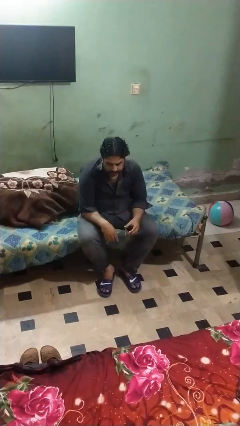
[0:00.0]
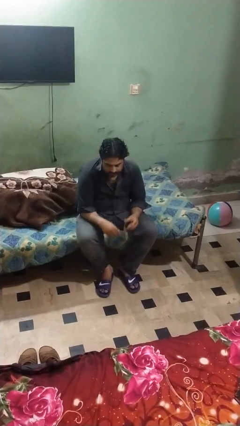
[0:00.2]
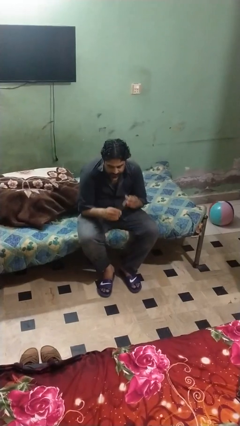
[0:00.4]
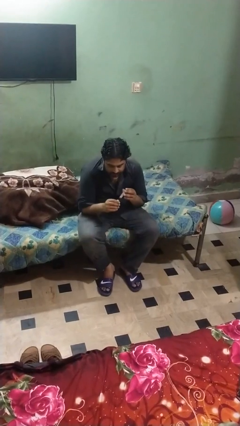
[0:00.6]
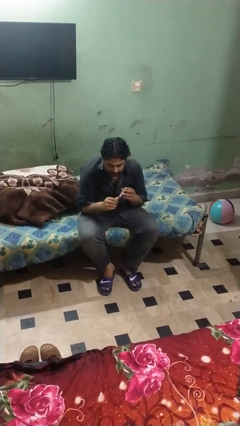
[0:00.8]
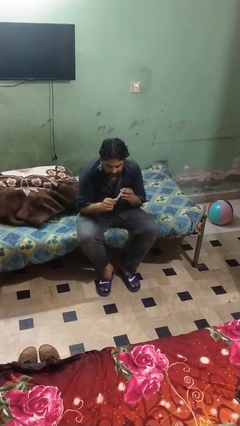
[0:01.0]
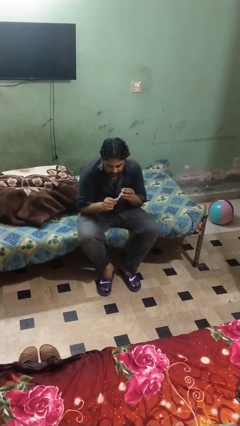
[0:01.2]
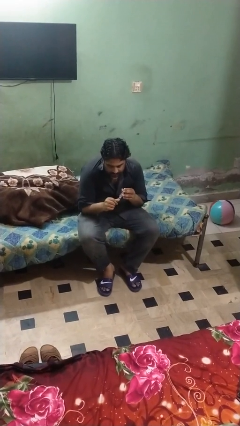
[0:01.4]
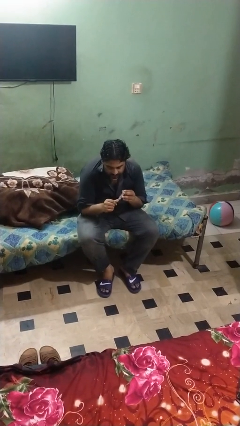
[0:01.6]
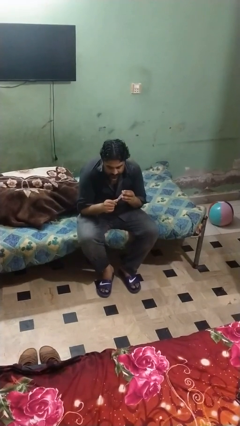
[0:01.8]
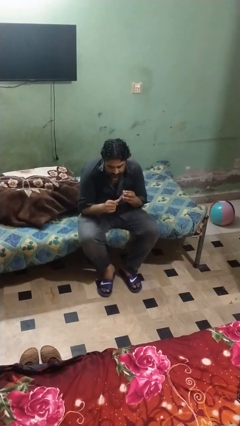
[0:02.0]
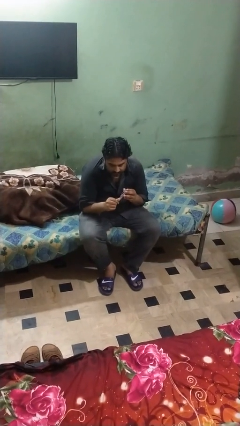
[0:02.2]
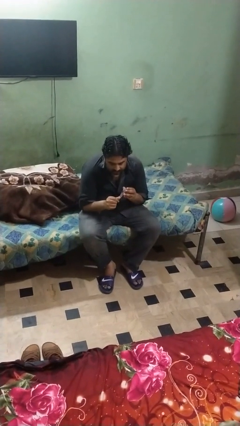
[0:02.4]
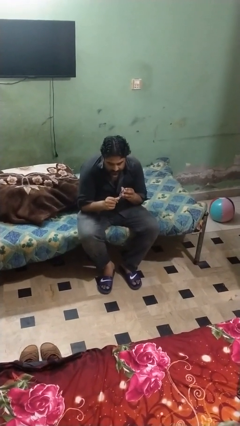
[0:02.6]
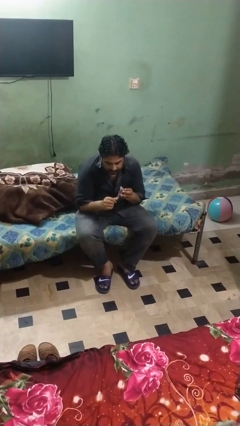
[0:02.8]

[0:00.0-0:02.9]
person clips fingernails

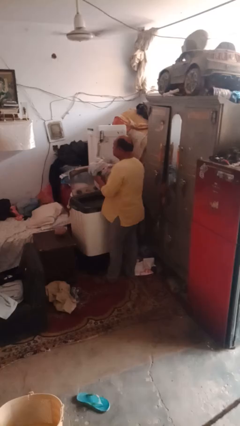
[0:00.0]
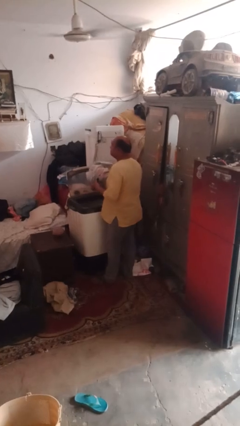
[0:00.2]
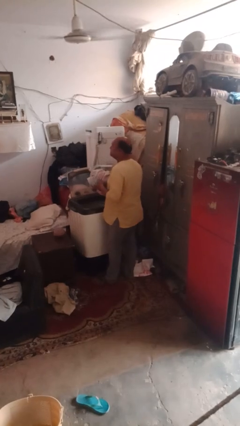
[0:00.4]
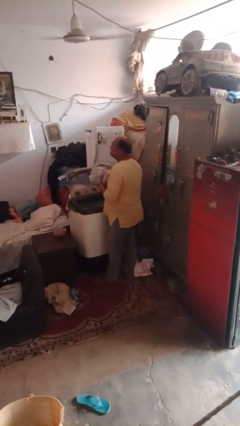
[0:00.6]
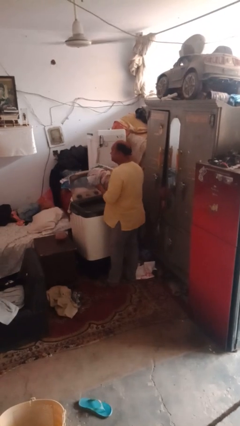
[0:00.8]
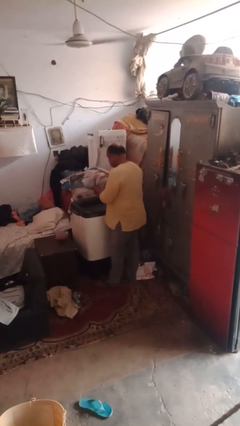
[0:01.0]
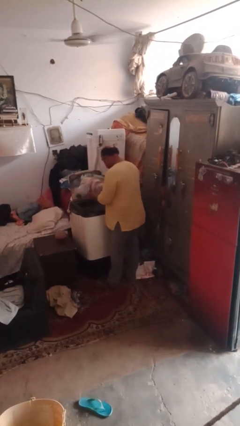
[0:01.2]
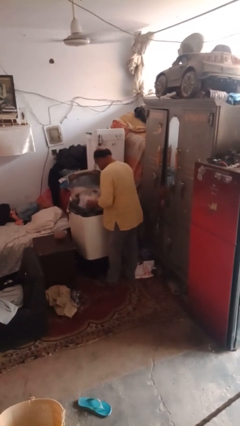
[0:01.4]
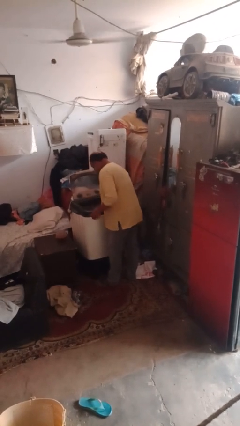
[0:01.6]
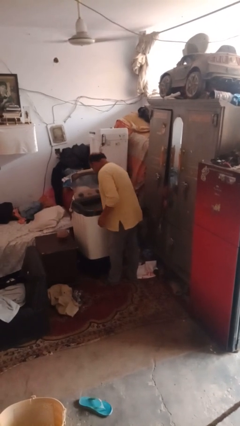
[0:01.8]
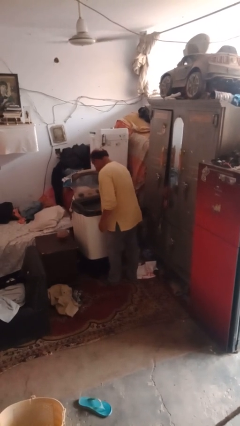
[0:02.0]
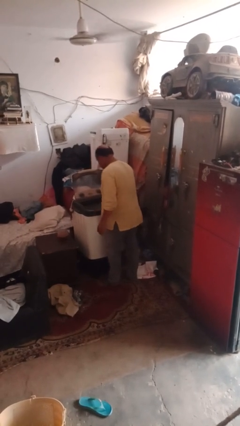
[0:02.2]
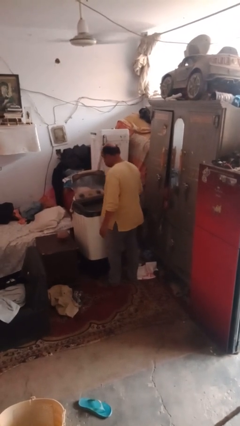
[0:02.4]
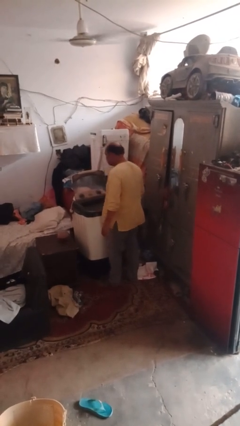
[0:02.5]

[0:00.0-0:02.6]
person loads clotheswasher

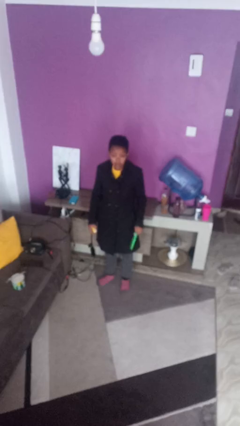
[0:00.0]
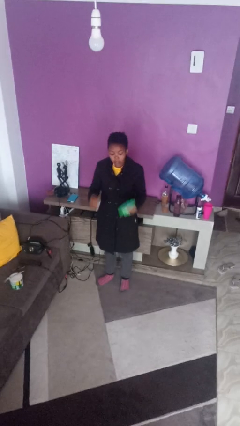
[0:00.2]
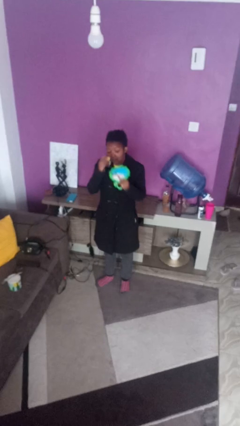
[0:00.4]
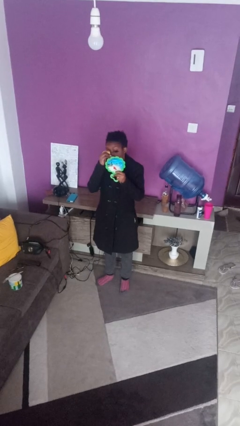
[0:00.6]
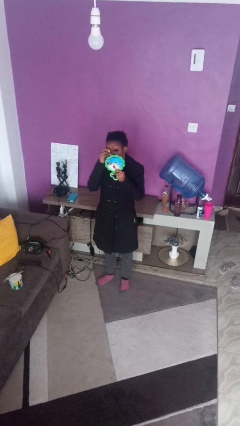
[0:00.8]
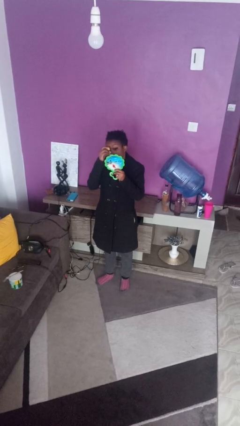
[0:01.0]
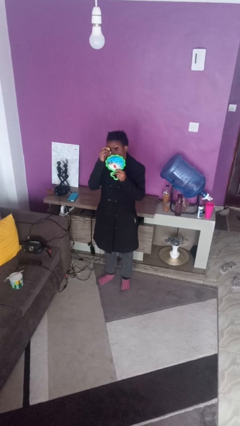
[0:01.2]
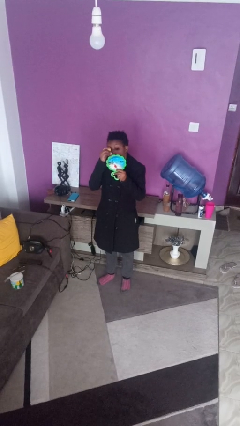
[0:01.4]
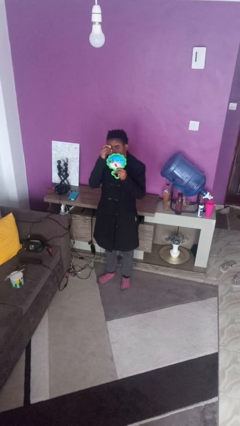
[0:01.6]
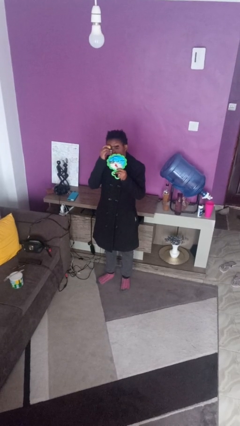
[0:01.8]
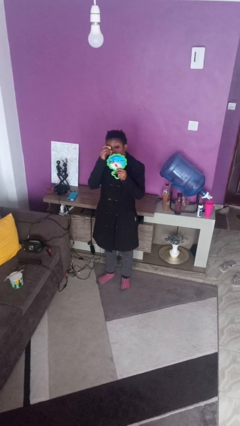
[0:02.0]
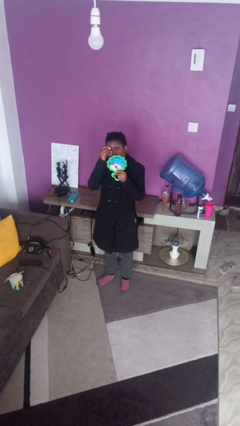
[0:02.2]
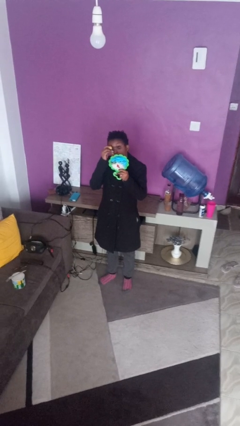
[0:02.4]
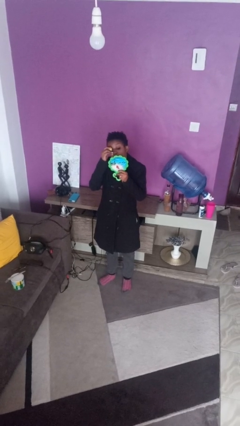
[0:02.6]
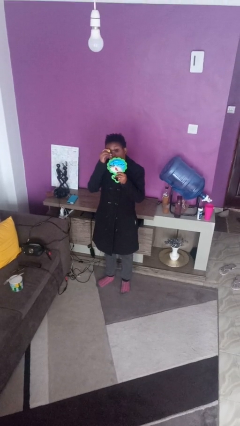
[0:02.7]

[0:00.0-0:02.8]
person applies eye makeup

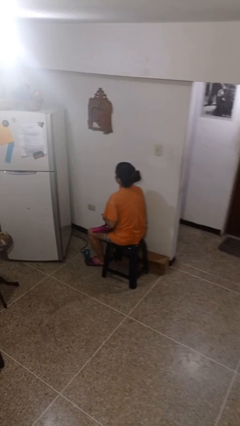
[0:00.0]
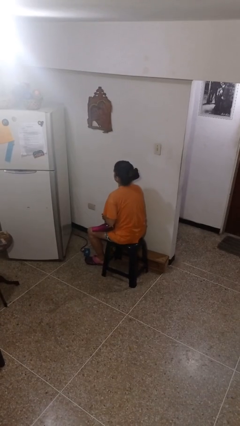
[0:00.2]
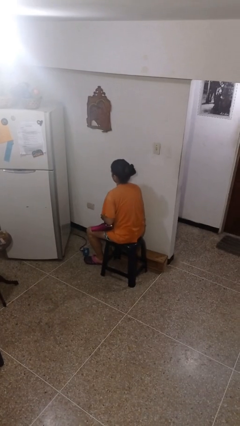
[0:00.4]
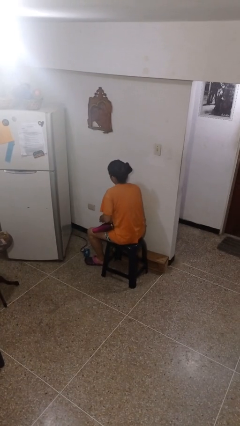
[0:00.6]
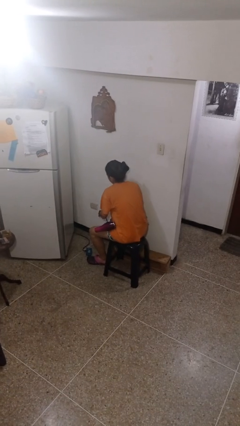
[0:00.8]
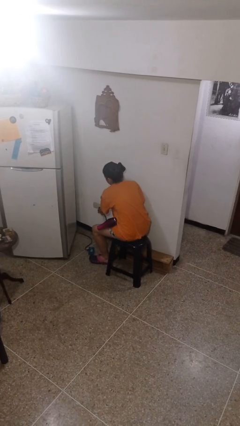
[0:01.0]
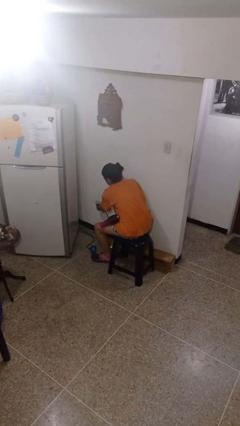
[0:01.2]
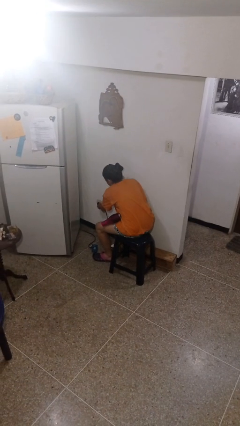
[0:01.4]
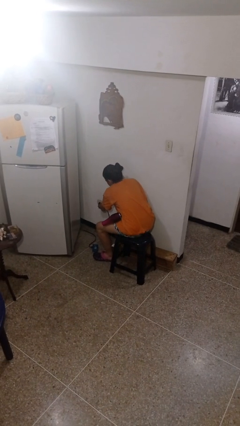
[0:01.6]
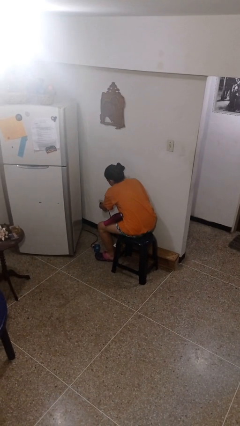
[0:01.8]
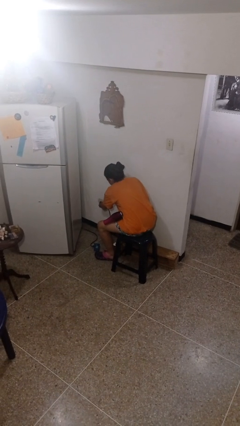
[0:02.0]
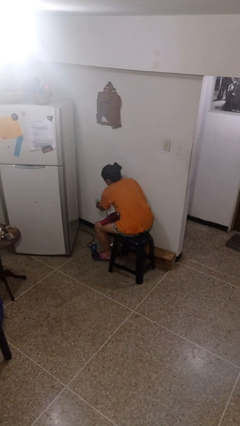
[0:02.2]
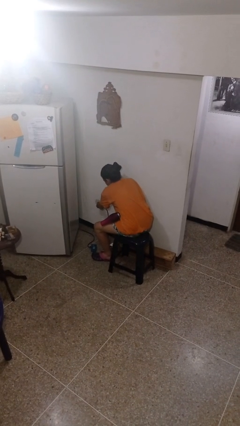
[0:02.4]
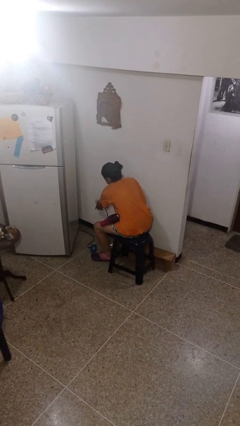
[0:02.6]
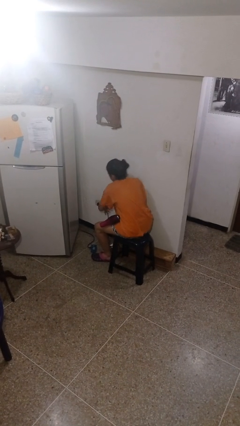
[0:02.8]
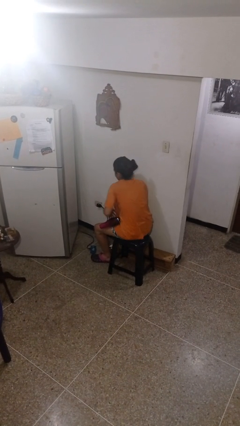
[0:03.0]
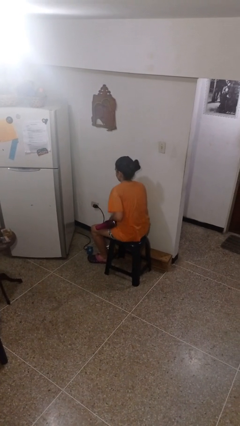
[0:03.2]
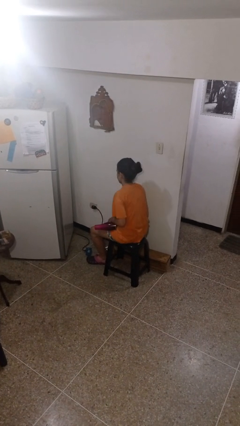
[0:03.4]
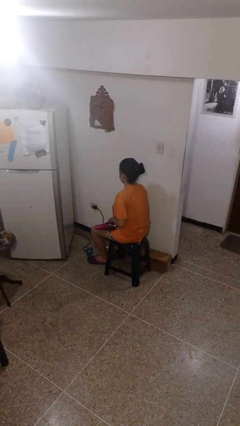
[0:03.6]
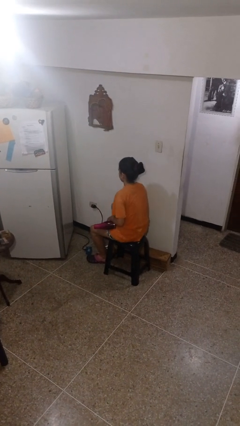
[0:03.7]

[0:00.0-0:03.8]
person plugs into electrical socket

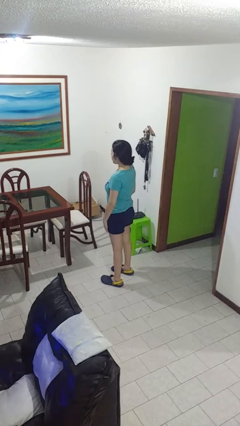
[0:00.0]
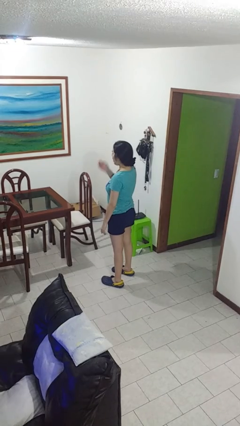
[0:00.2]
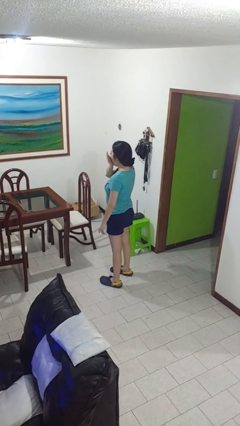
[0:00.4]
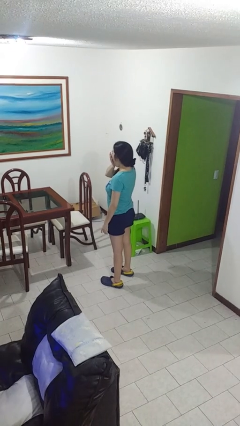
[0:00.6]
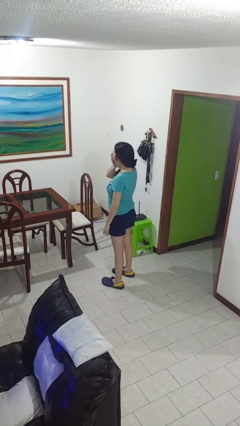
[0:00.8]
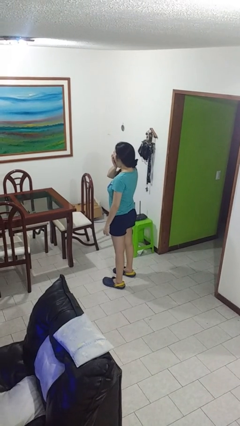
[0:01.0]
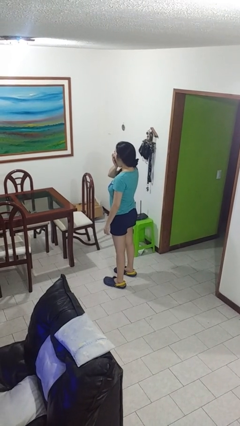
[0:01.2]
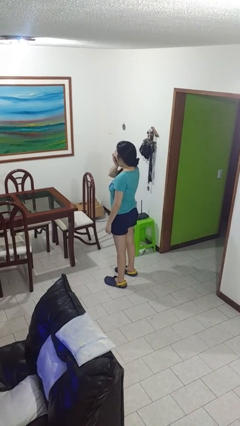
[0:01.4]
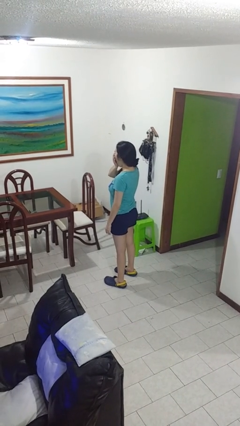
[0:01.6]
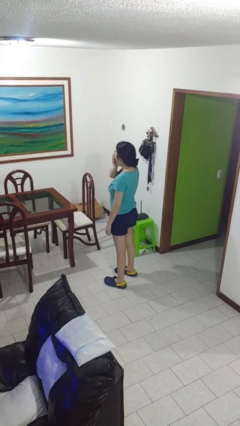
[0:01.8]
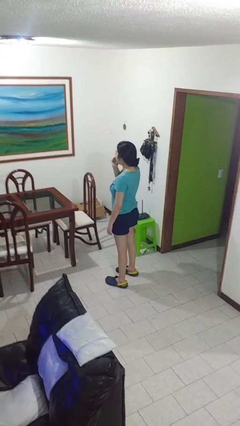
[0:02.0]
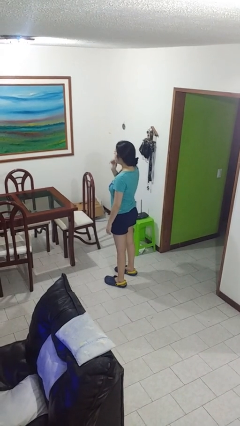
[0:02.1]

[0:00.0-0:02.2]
person yawns

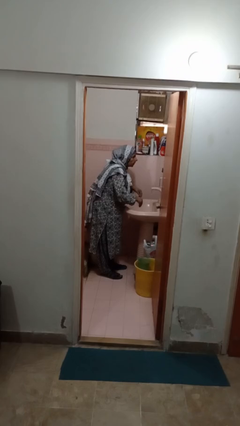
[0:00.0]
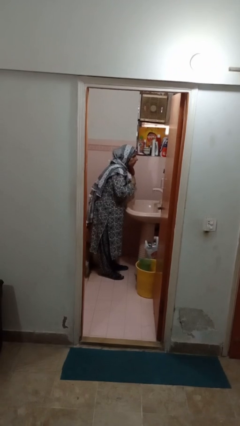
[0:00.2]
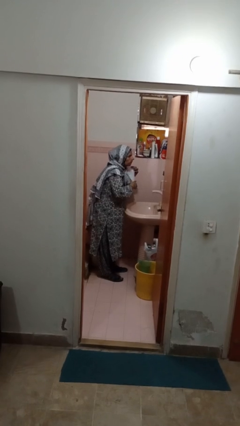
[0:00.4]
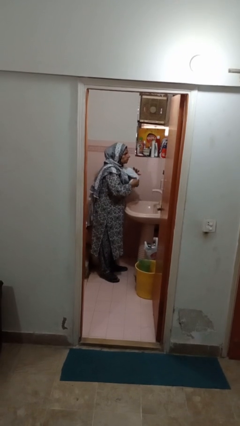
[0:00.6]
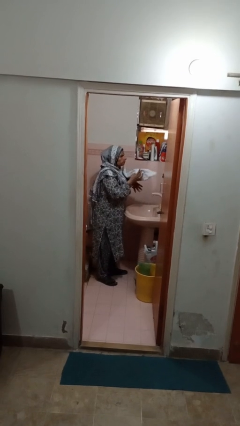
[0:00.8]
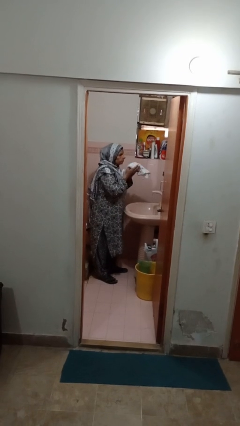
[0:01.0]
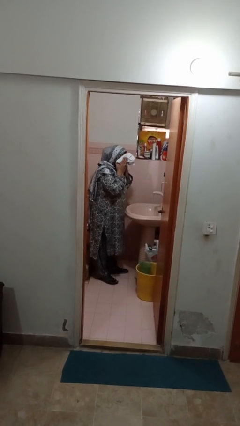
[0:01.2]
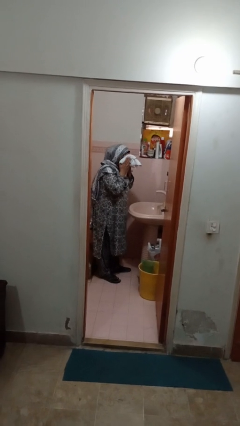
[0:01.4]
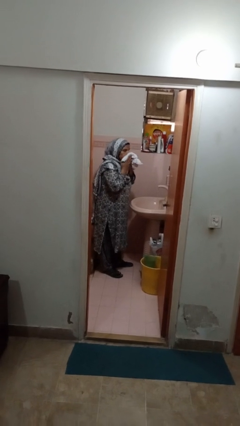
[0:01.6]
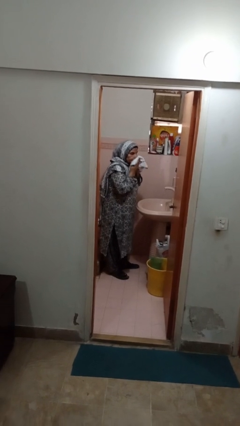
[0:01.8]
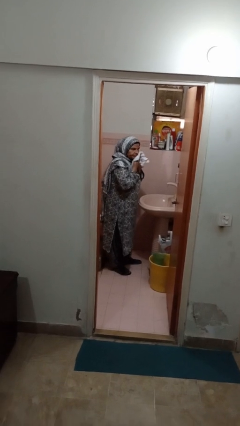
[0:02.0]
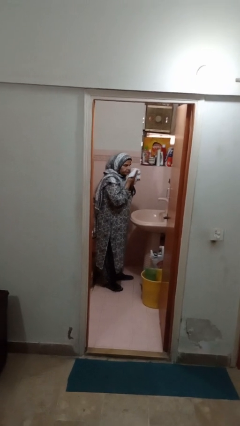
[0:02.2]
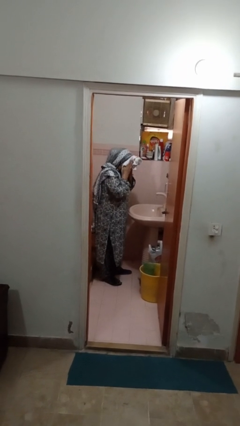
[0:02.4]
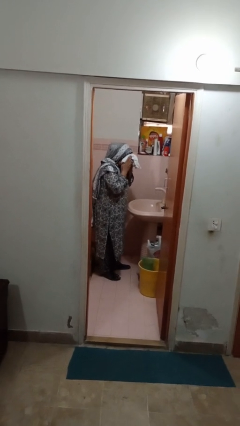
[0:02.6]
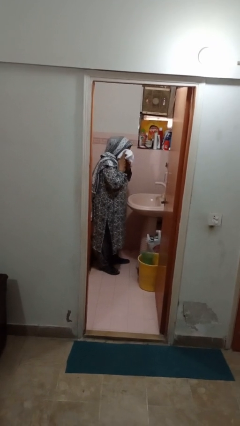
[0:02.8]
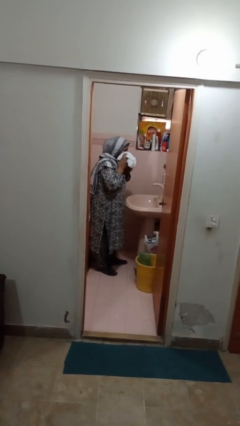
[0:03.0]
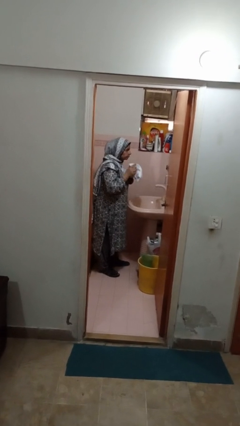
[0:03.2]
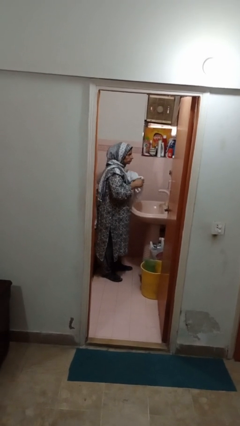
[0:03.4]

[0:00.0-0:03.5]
person dries face with towel

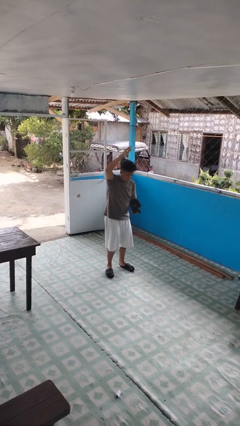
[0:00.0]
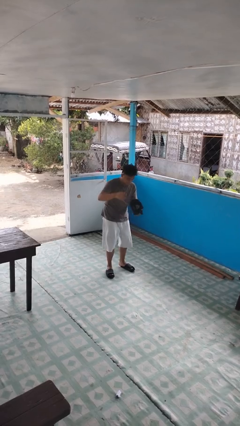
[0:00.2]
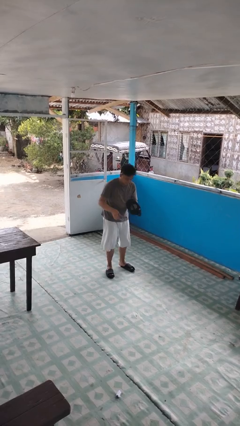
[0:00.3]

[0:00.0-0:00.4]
person catches dropped object
